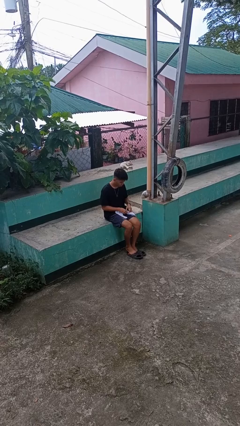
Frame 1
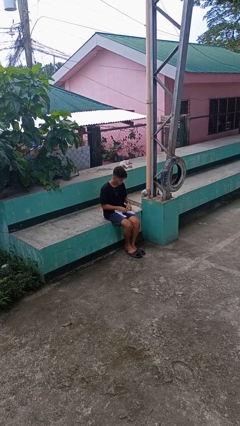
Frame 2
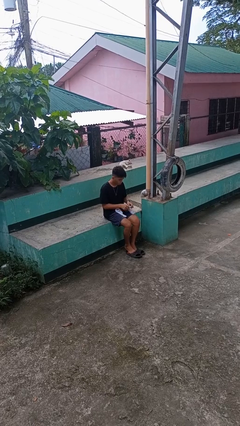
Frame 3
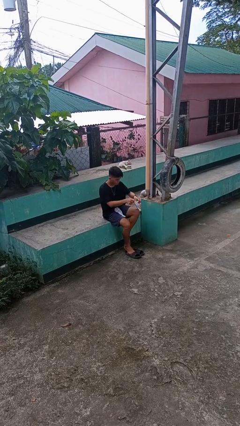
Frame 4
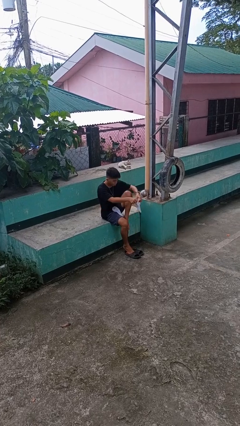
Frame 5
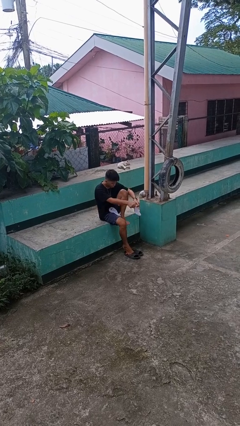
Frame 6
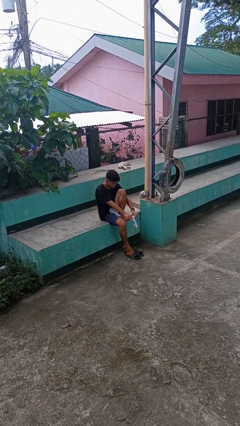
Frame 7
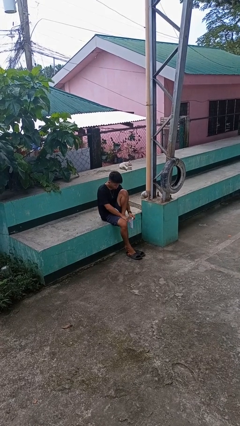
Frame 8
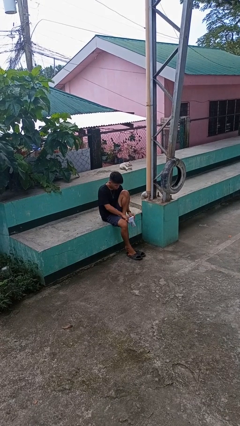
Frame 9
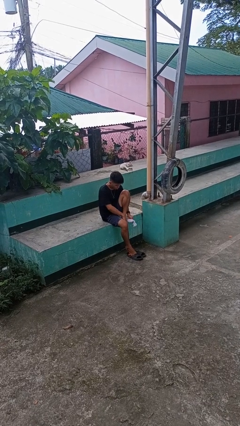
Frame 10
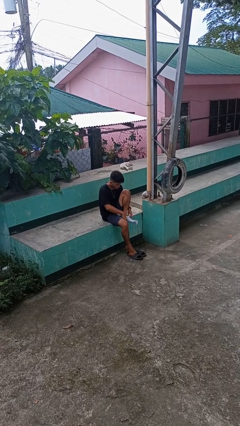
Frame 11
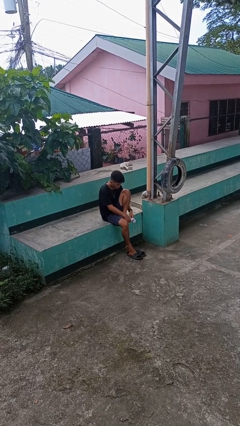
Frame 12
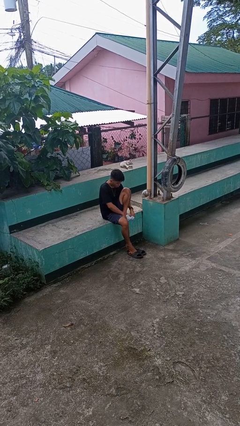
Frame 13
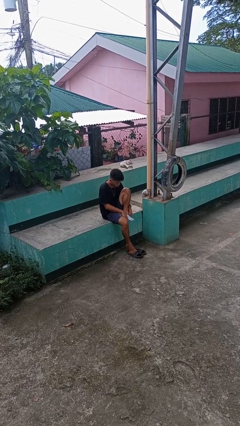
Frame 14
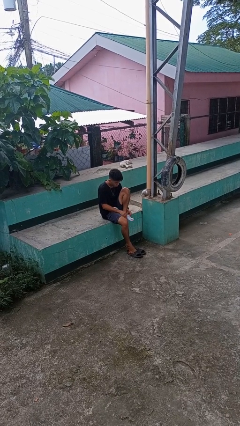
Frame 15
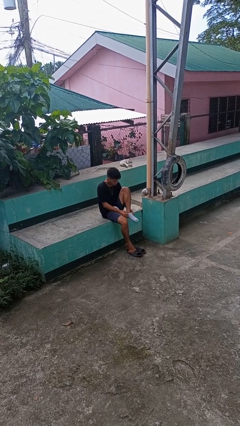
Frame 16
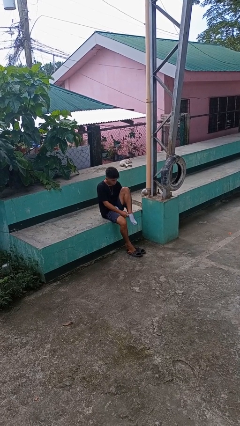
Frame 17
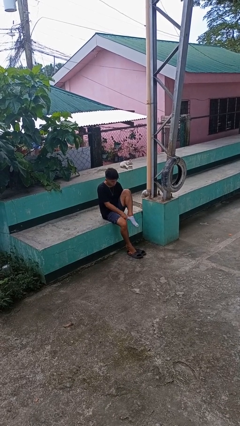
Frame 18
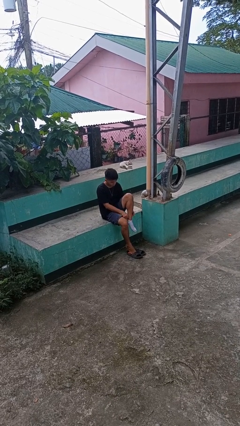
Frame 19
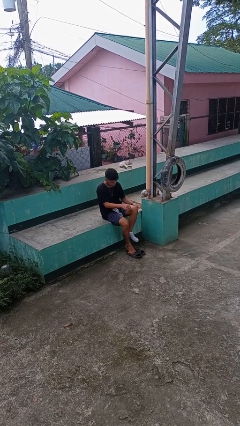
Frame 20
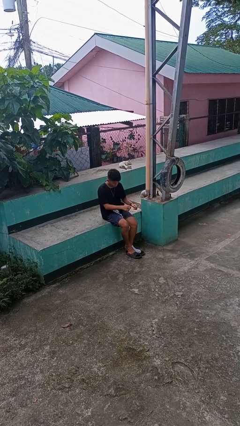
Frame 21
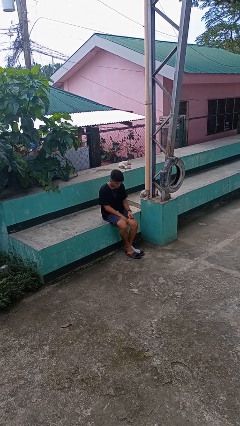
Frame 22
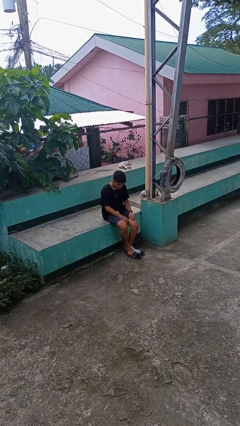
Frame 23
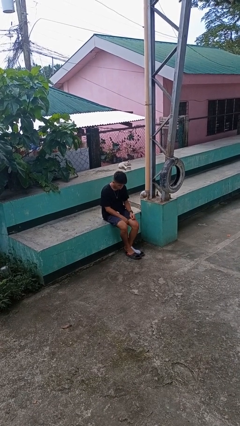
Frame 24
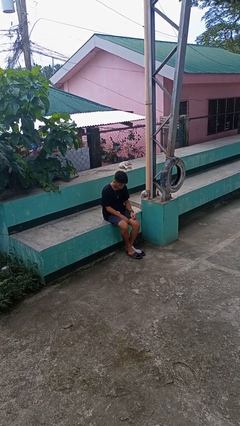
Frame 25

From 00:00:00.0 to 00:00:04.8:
person puts on socks

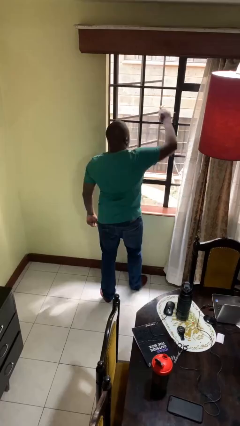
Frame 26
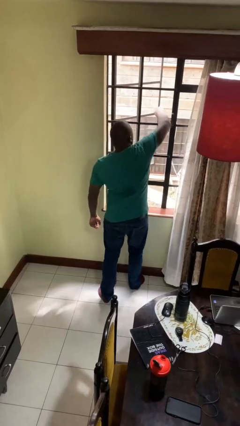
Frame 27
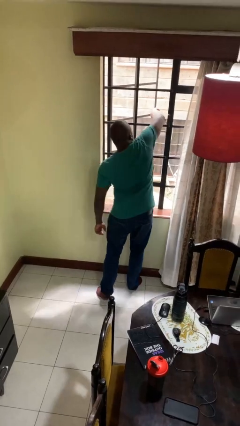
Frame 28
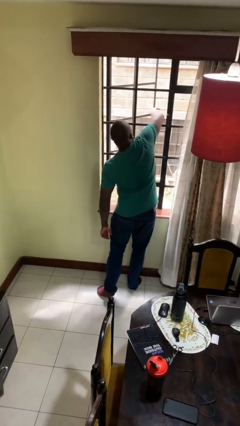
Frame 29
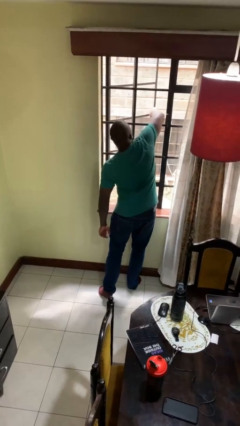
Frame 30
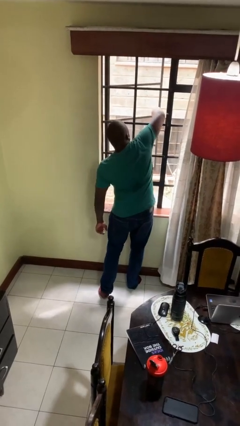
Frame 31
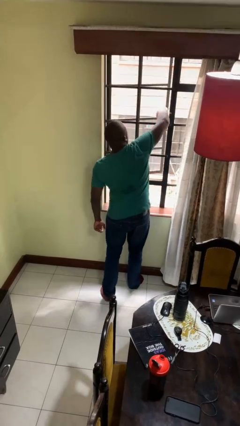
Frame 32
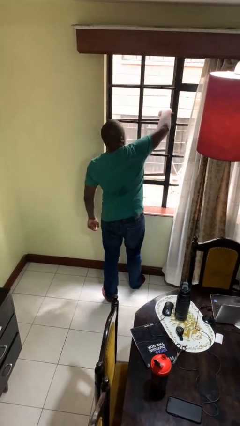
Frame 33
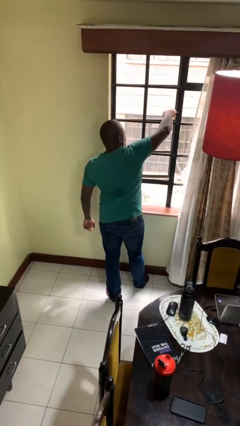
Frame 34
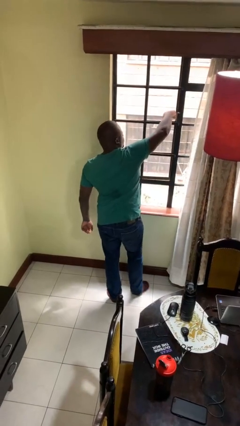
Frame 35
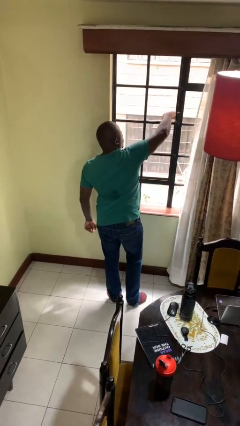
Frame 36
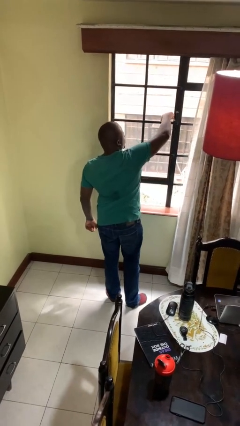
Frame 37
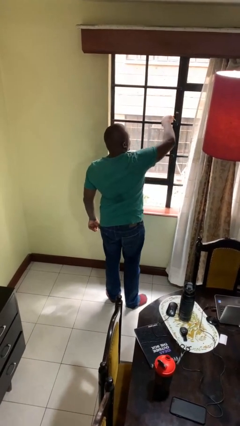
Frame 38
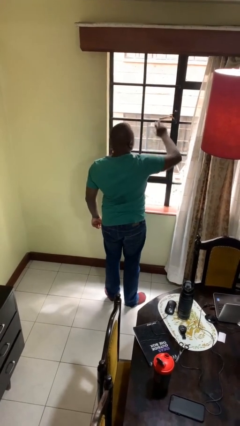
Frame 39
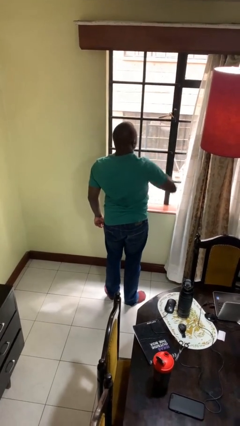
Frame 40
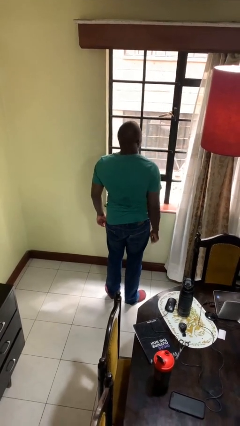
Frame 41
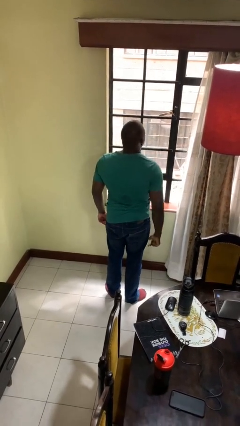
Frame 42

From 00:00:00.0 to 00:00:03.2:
person closes home window

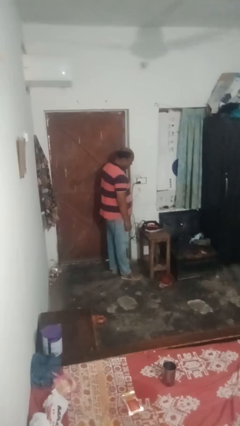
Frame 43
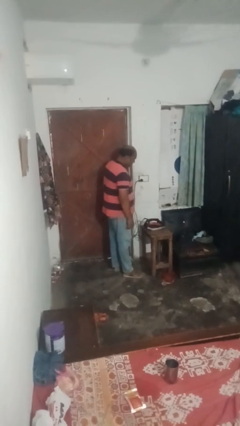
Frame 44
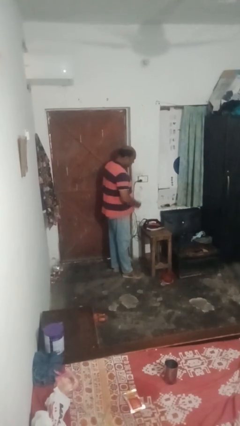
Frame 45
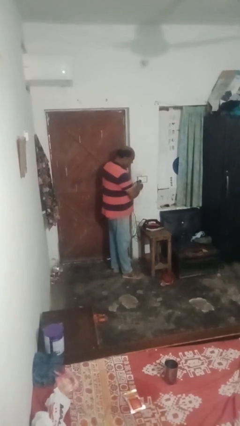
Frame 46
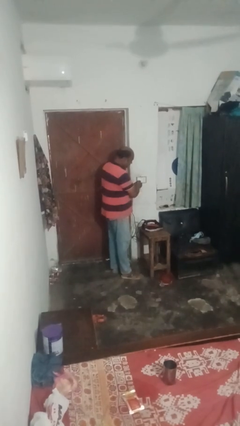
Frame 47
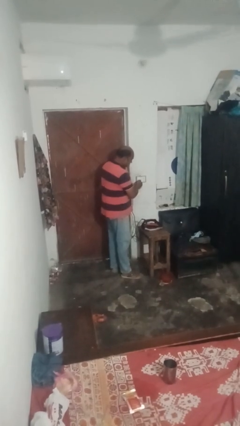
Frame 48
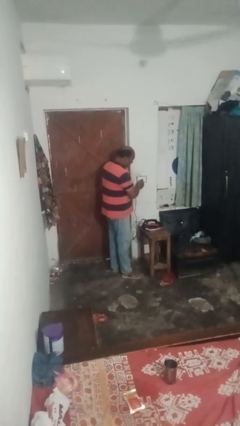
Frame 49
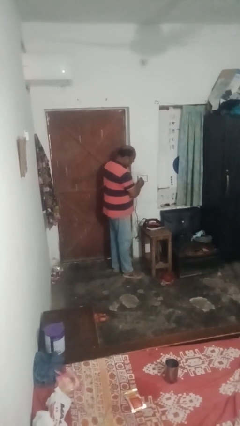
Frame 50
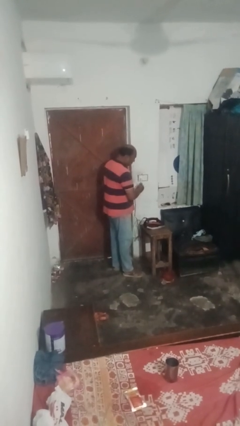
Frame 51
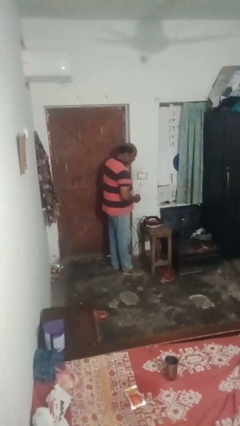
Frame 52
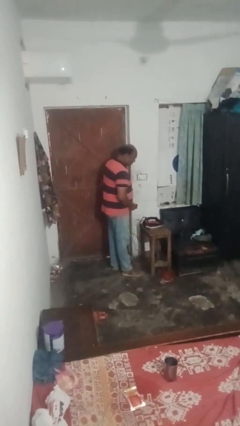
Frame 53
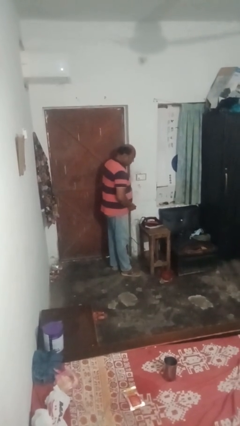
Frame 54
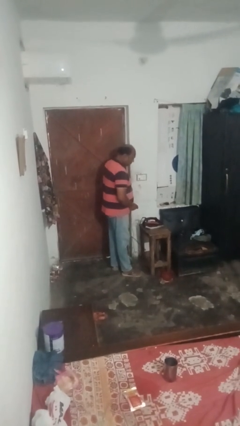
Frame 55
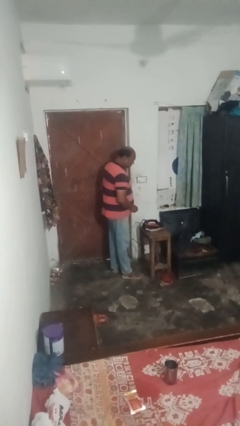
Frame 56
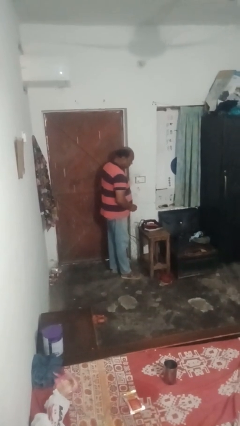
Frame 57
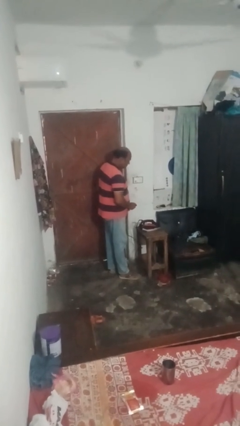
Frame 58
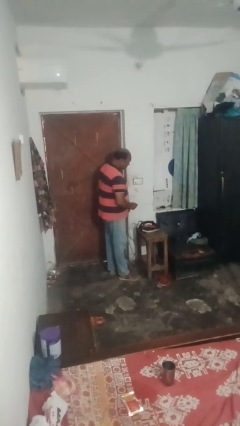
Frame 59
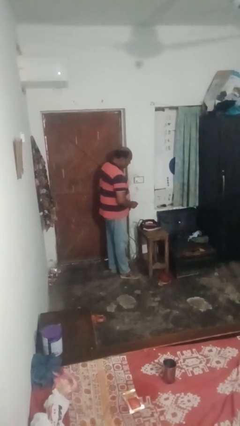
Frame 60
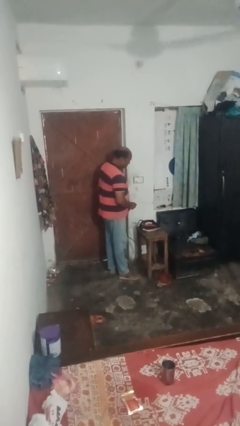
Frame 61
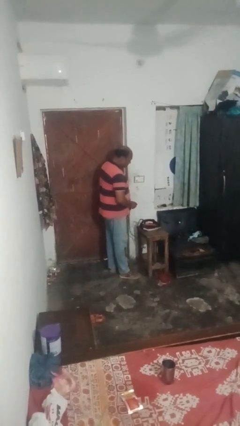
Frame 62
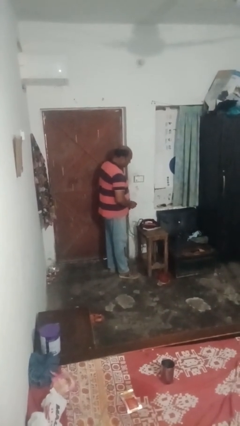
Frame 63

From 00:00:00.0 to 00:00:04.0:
person unplugs from electrical socket

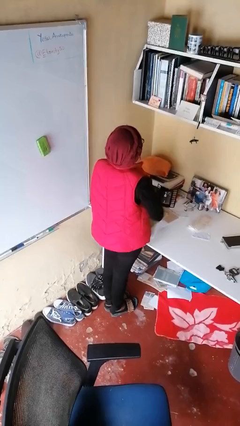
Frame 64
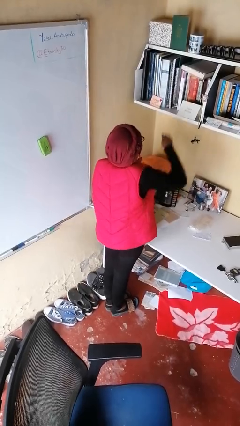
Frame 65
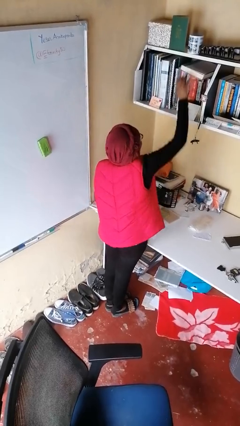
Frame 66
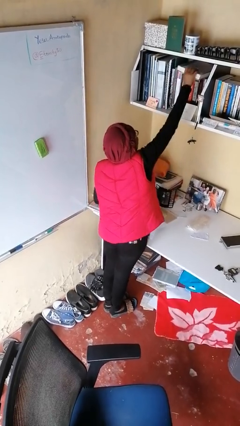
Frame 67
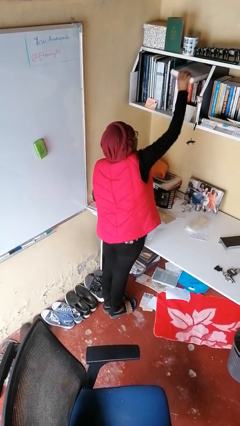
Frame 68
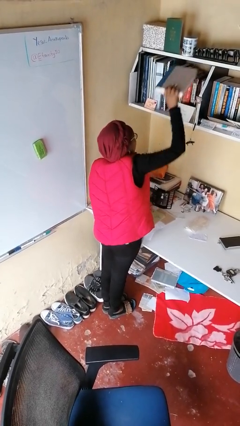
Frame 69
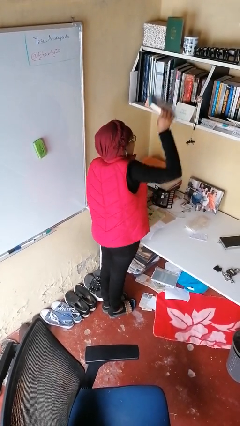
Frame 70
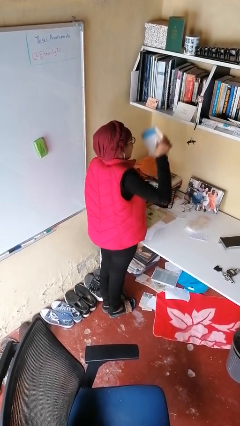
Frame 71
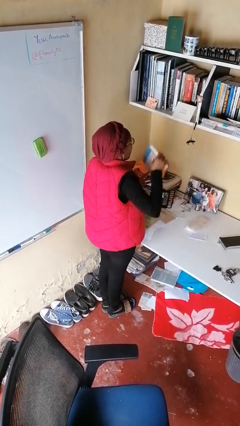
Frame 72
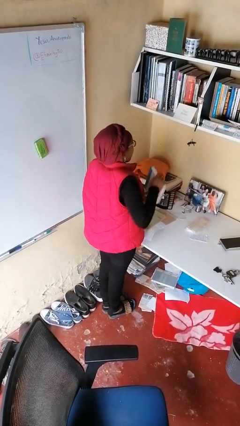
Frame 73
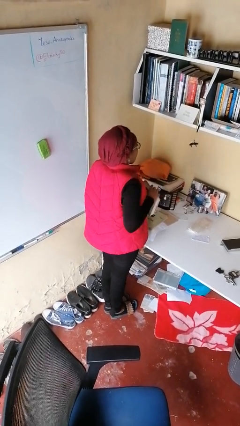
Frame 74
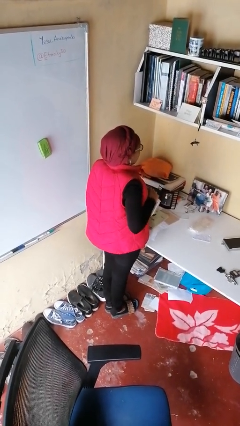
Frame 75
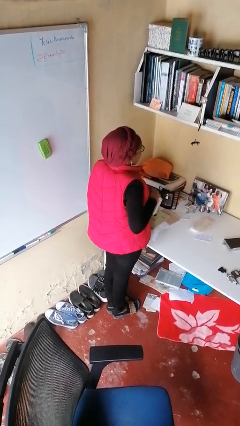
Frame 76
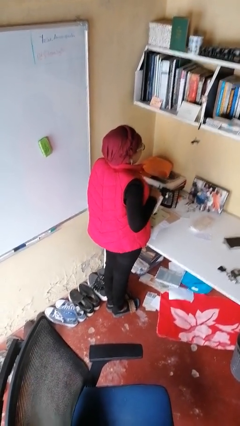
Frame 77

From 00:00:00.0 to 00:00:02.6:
person picks up object from shelf

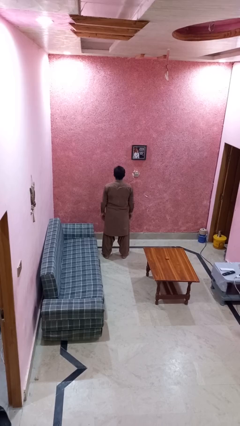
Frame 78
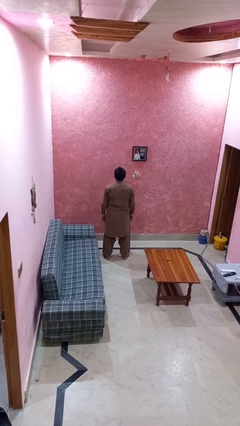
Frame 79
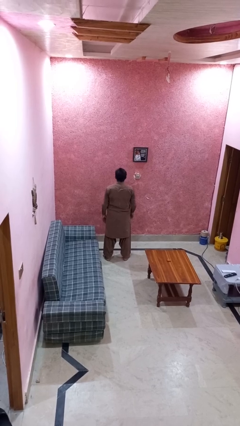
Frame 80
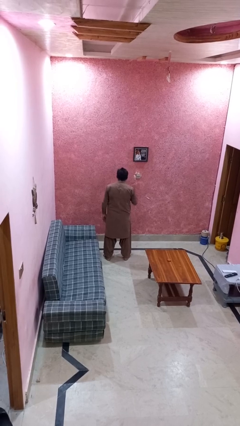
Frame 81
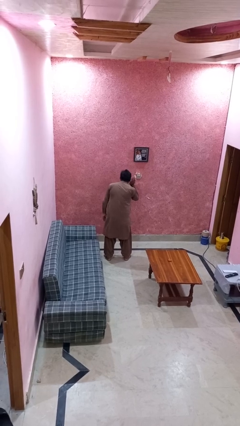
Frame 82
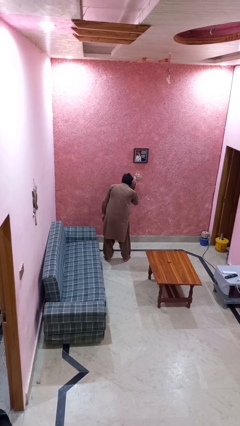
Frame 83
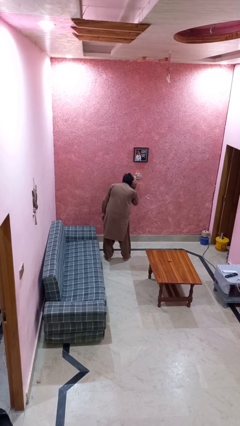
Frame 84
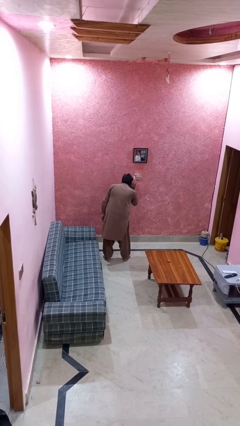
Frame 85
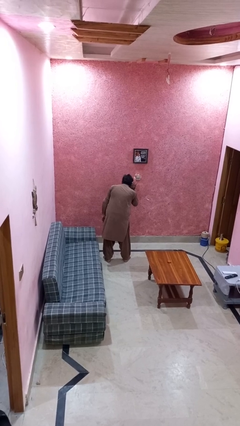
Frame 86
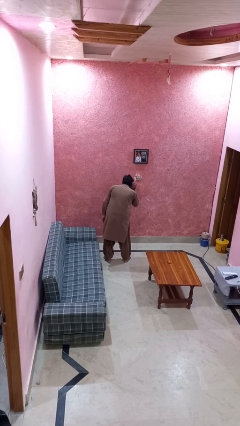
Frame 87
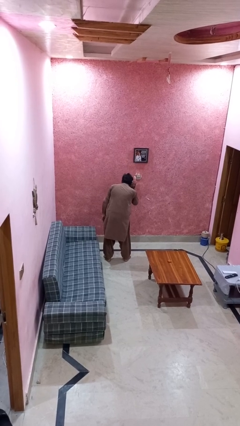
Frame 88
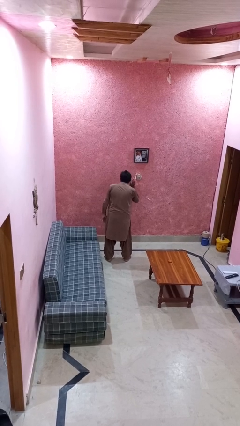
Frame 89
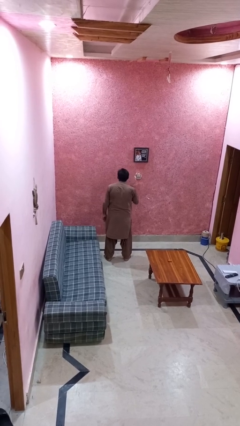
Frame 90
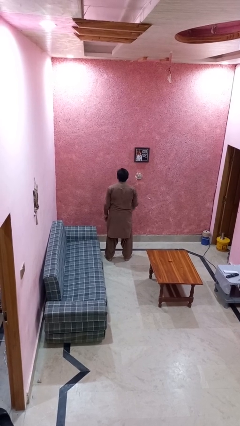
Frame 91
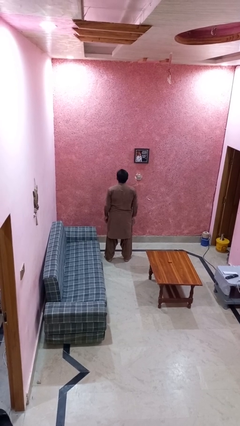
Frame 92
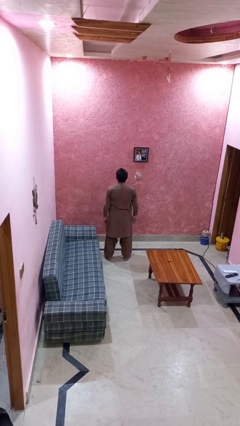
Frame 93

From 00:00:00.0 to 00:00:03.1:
person gestures listen closely
